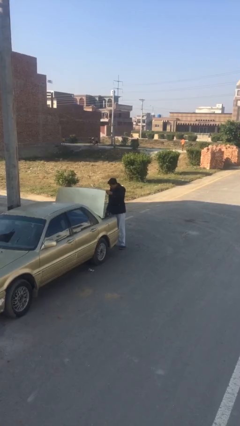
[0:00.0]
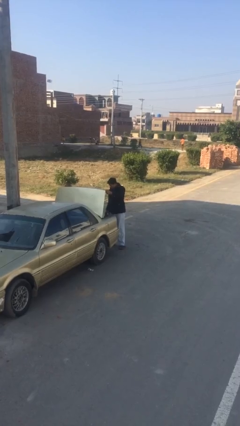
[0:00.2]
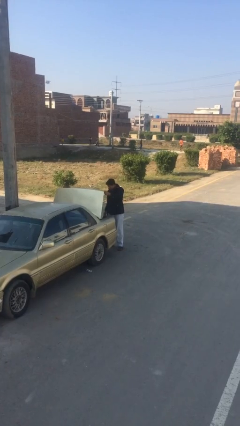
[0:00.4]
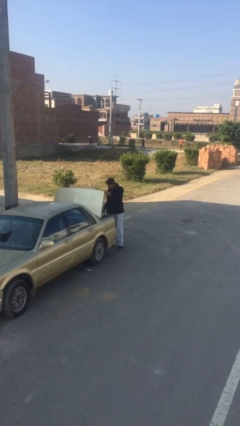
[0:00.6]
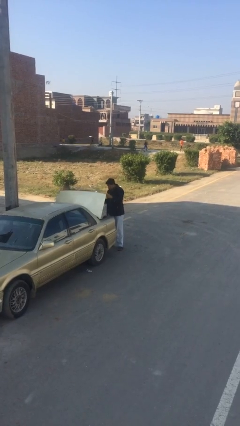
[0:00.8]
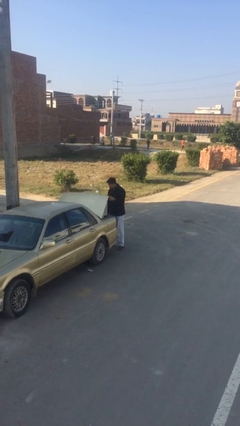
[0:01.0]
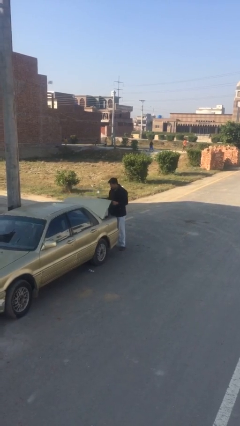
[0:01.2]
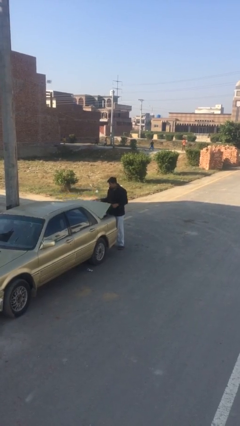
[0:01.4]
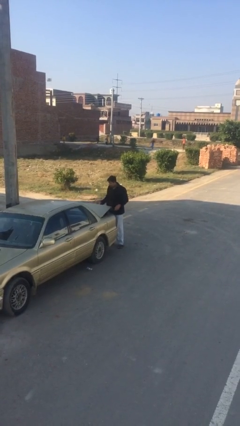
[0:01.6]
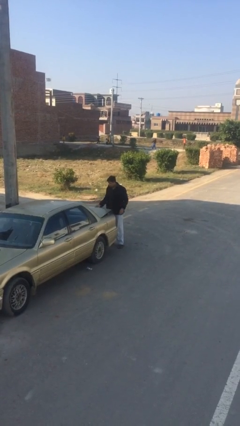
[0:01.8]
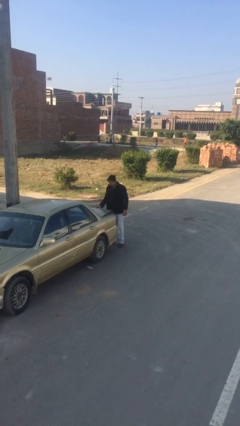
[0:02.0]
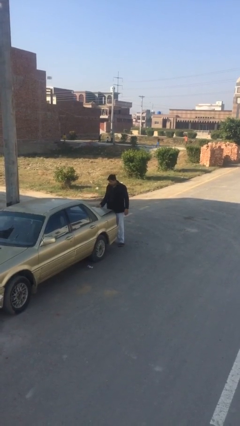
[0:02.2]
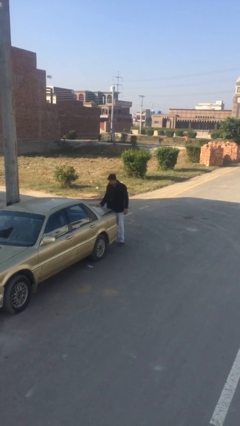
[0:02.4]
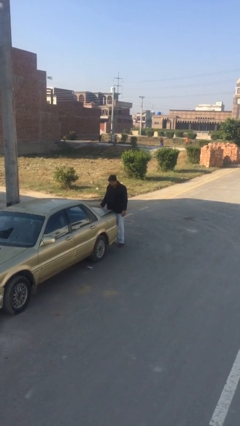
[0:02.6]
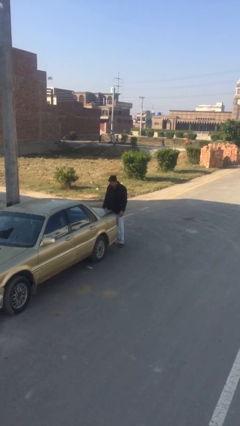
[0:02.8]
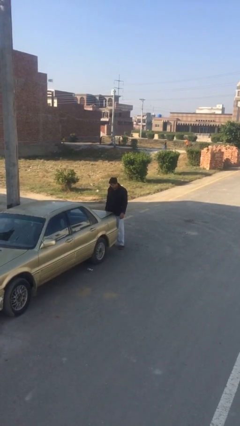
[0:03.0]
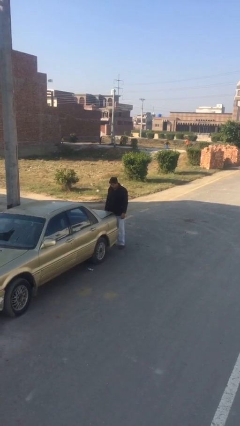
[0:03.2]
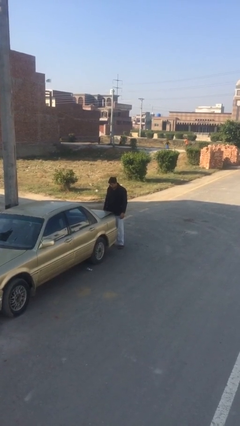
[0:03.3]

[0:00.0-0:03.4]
person closes car trunk

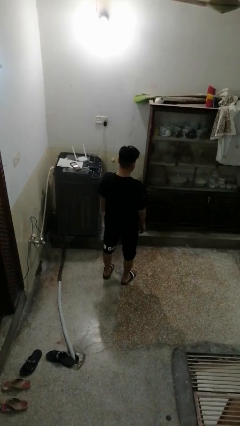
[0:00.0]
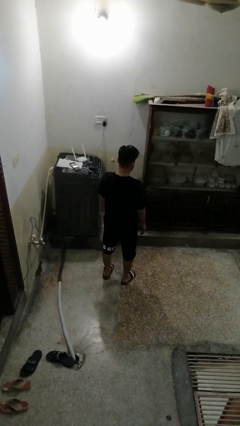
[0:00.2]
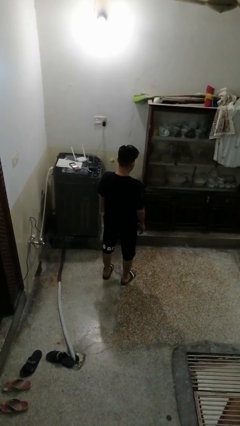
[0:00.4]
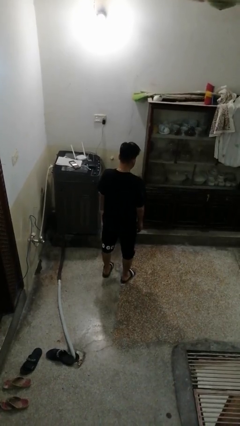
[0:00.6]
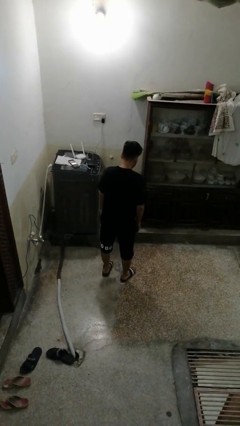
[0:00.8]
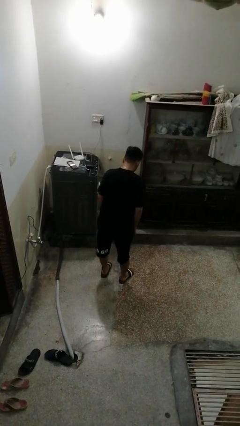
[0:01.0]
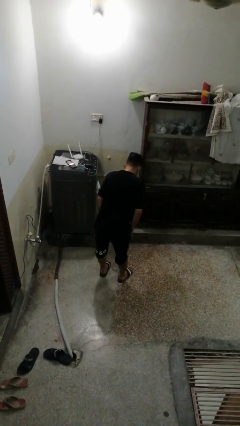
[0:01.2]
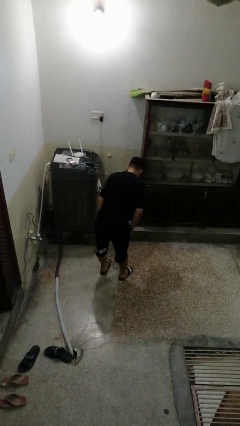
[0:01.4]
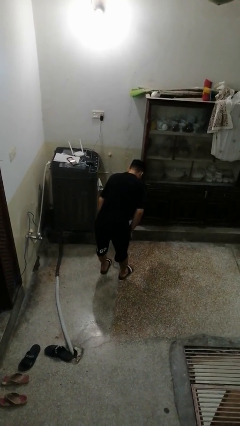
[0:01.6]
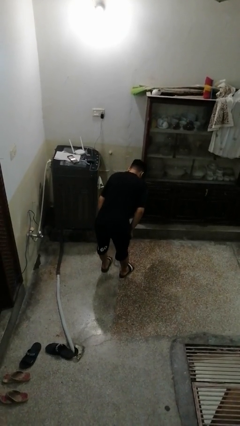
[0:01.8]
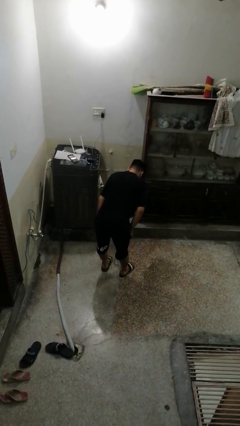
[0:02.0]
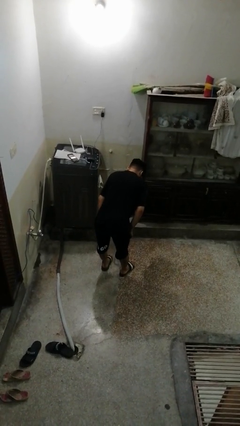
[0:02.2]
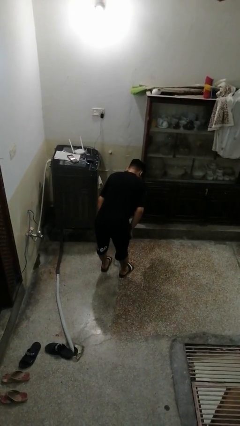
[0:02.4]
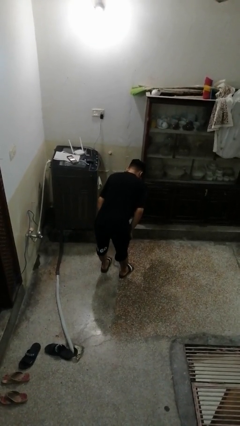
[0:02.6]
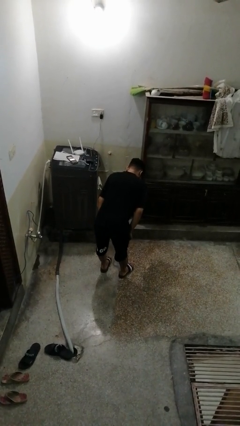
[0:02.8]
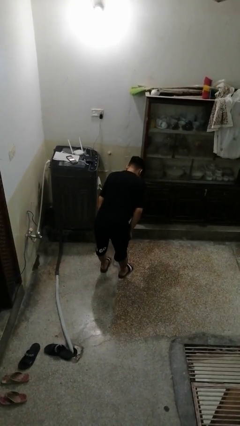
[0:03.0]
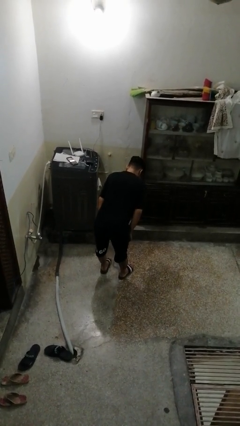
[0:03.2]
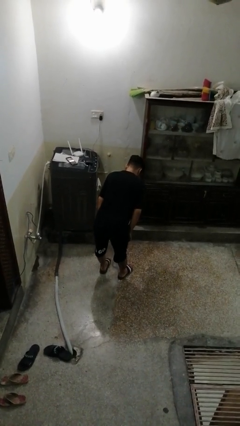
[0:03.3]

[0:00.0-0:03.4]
person bows

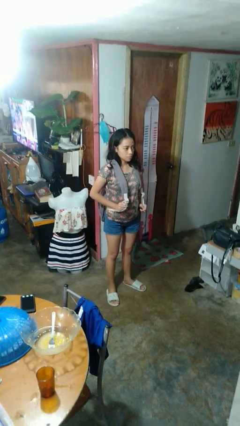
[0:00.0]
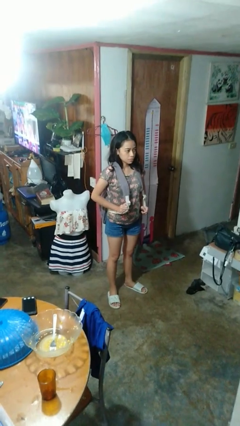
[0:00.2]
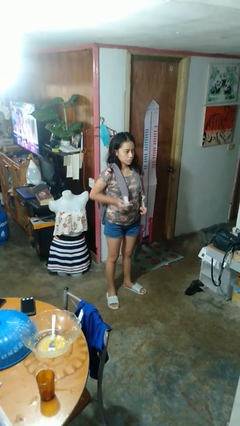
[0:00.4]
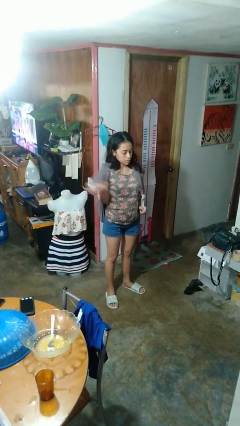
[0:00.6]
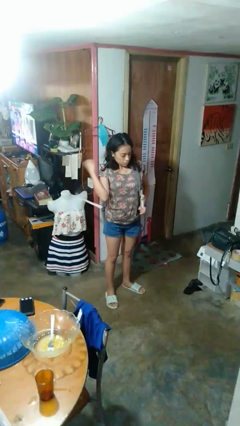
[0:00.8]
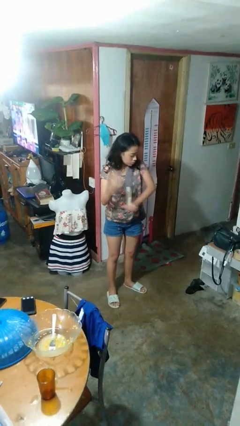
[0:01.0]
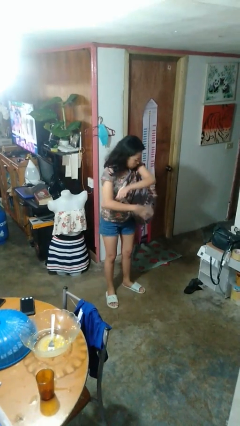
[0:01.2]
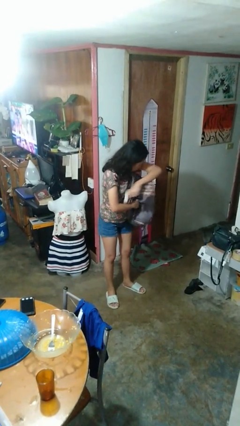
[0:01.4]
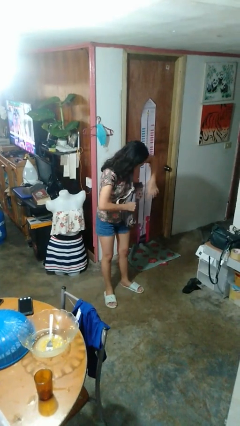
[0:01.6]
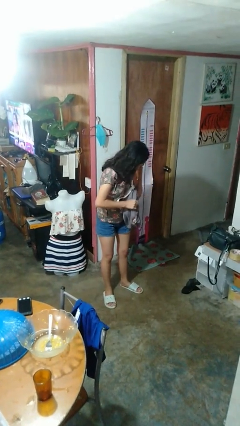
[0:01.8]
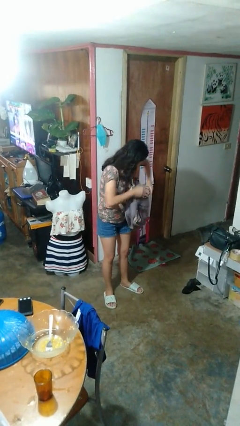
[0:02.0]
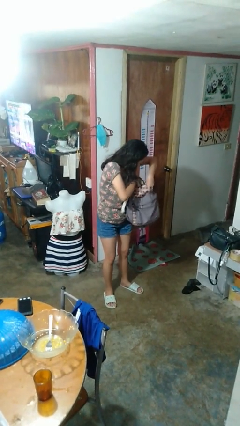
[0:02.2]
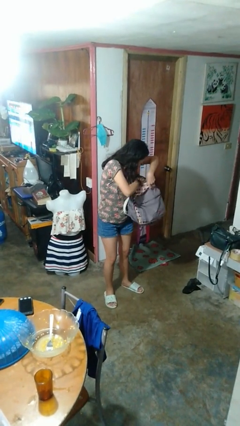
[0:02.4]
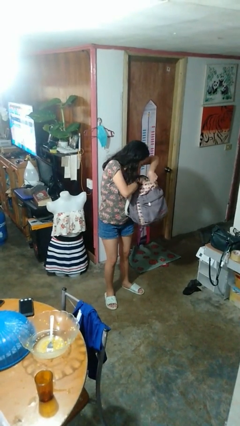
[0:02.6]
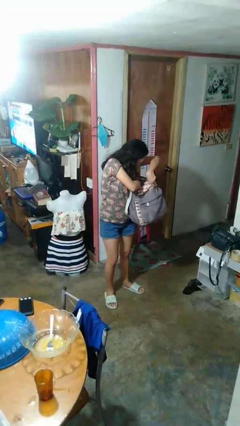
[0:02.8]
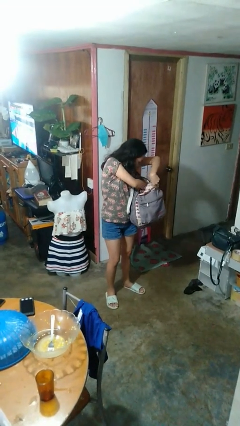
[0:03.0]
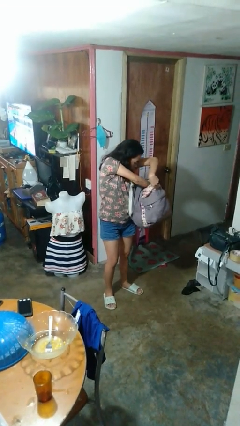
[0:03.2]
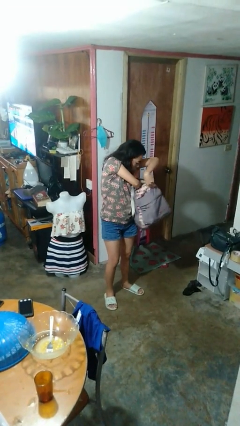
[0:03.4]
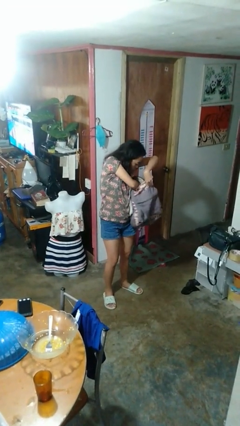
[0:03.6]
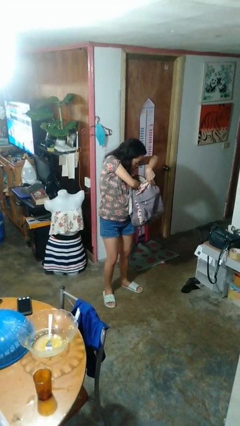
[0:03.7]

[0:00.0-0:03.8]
person searches in backpack

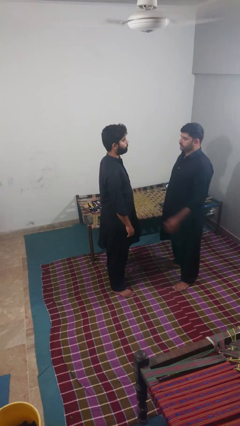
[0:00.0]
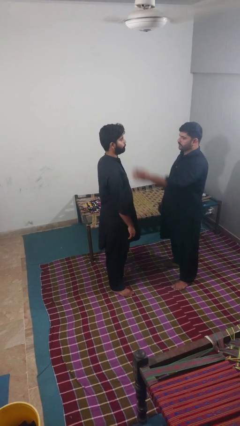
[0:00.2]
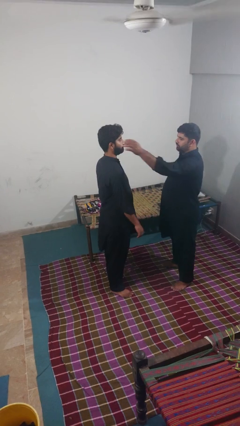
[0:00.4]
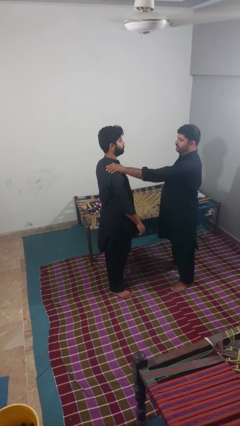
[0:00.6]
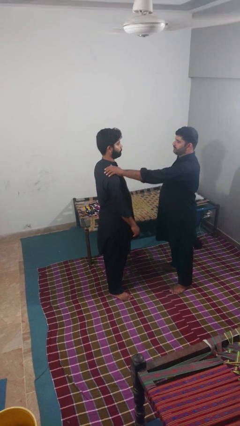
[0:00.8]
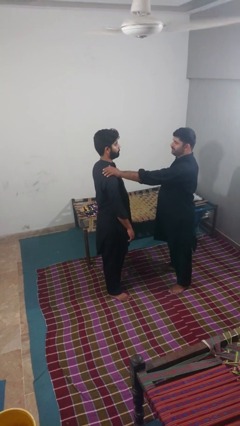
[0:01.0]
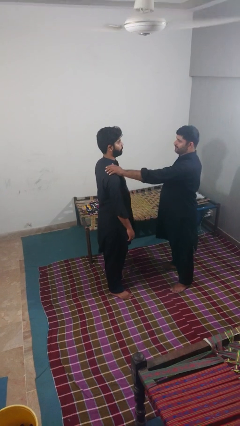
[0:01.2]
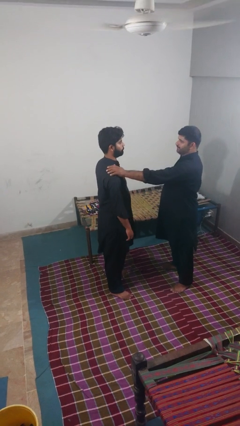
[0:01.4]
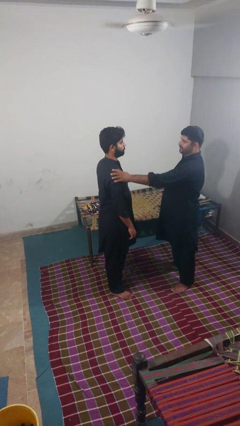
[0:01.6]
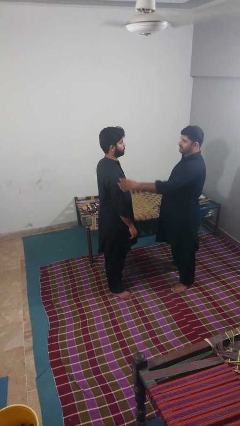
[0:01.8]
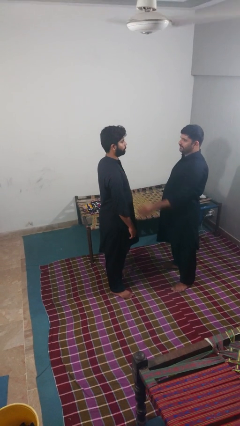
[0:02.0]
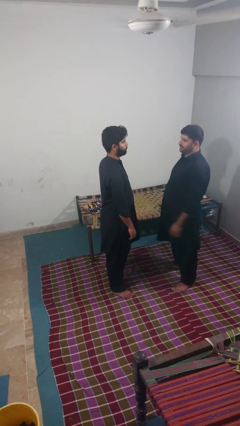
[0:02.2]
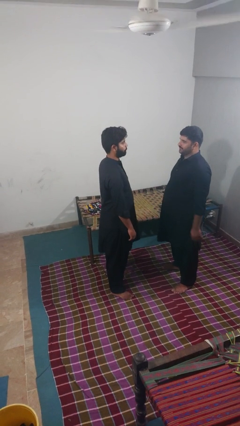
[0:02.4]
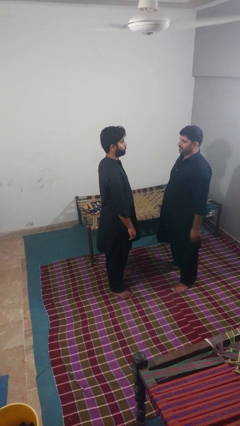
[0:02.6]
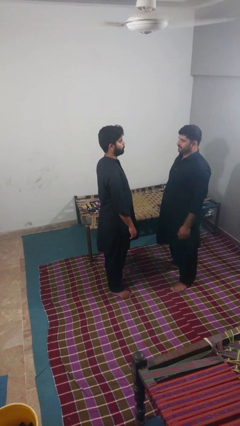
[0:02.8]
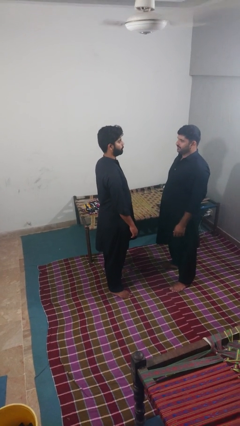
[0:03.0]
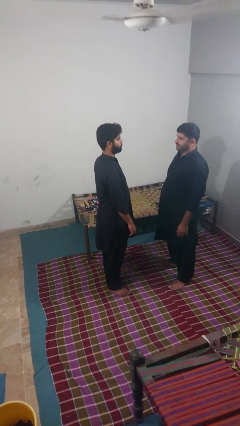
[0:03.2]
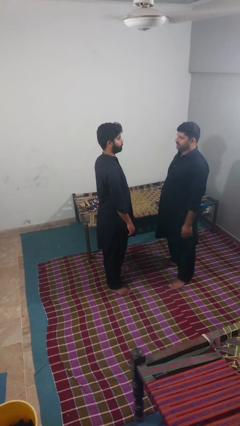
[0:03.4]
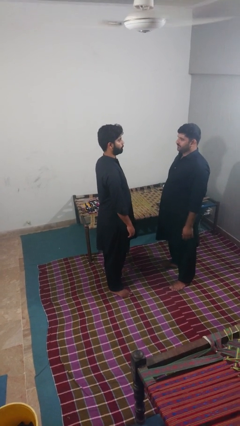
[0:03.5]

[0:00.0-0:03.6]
person pounds shoulders of person

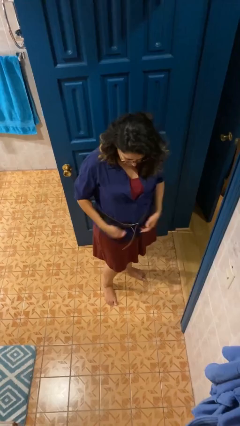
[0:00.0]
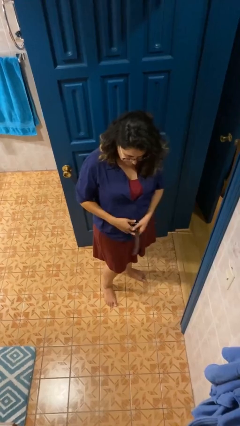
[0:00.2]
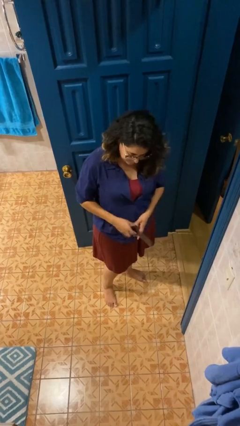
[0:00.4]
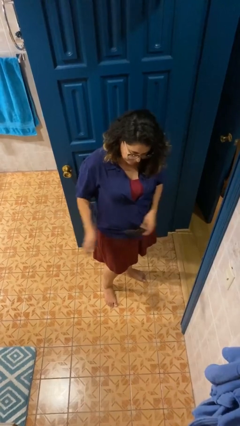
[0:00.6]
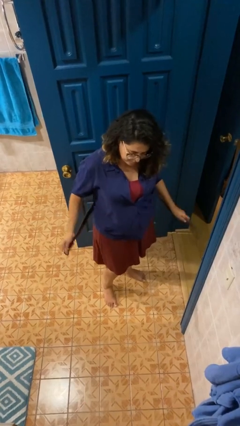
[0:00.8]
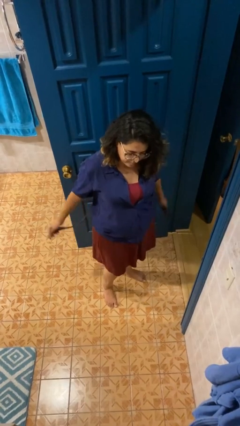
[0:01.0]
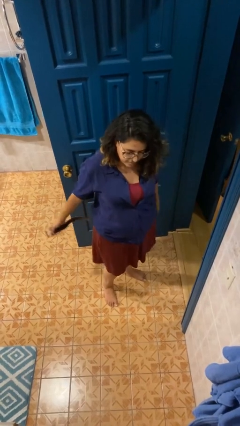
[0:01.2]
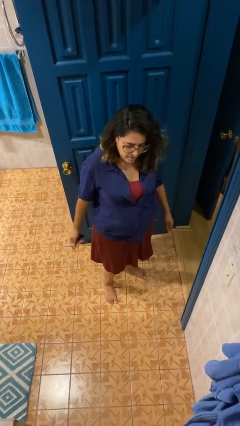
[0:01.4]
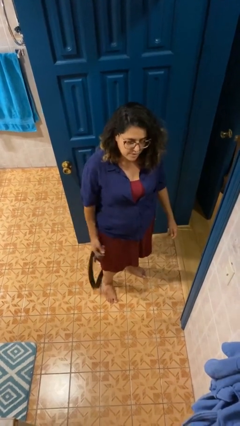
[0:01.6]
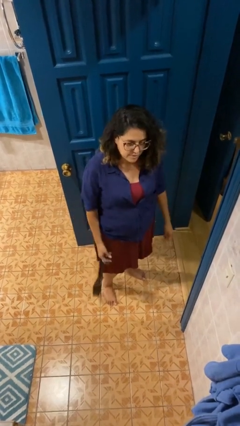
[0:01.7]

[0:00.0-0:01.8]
person takes off belt

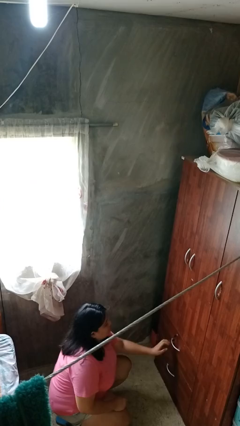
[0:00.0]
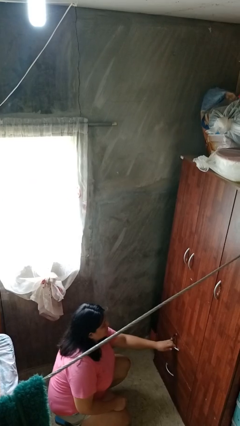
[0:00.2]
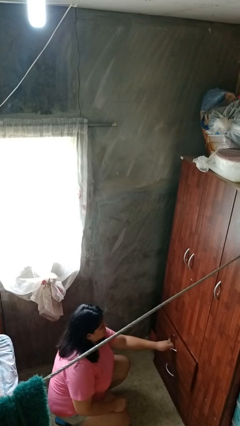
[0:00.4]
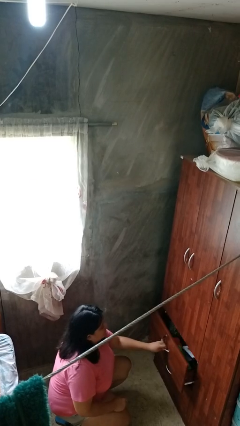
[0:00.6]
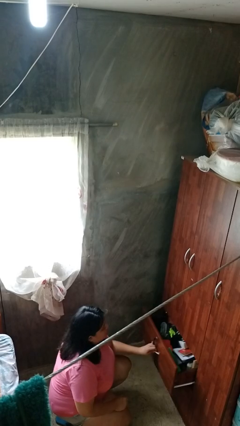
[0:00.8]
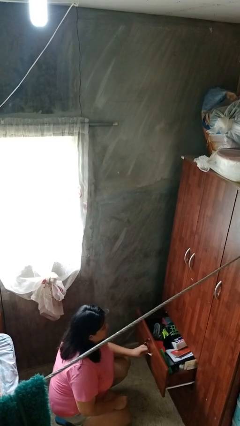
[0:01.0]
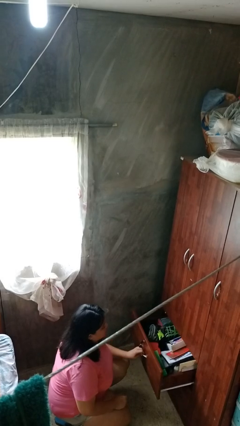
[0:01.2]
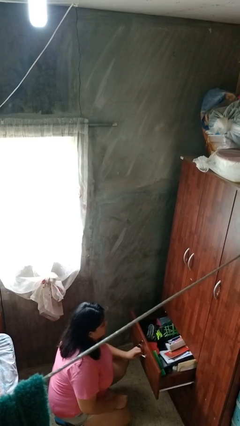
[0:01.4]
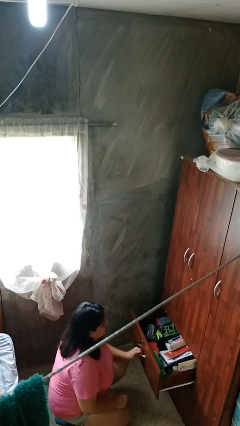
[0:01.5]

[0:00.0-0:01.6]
person opens dresser drawer
